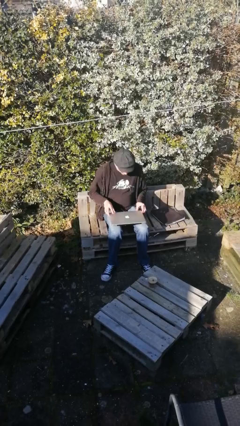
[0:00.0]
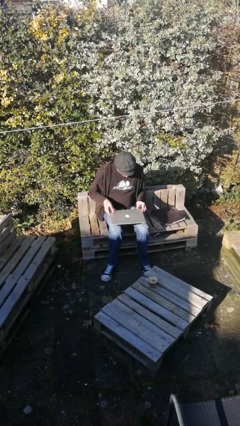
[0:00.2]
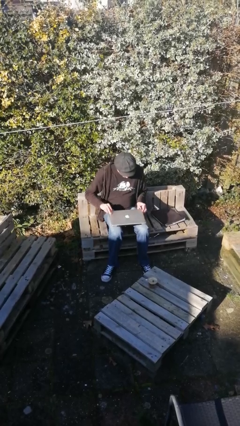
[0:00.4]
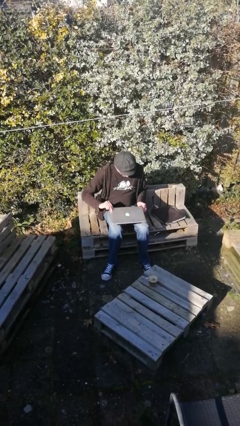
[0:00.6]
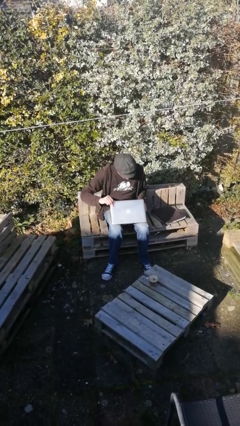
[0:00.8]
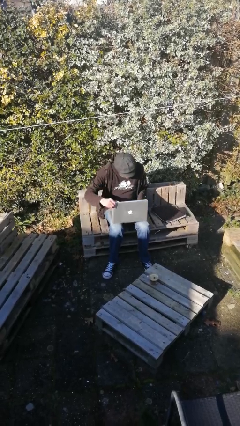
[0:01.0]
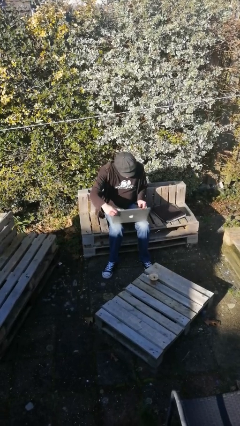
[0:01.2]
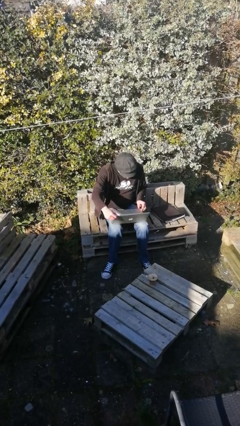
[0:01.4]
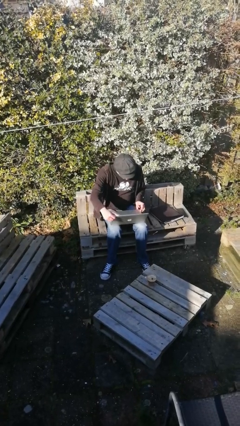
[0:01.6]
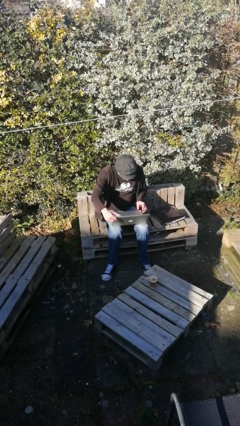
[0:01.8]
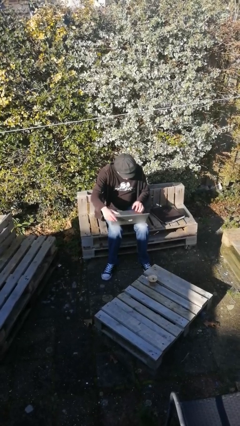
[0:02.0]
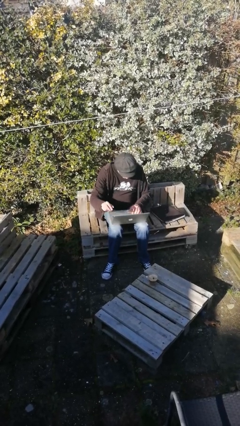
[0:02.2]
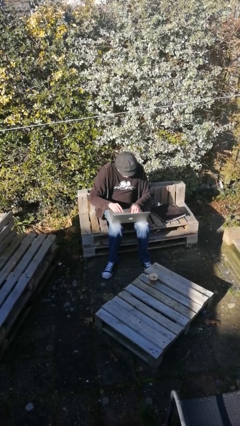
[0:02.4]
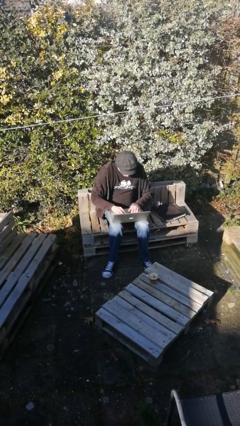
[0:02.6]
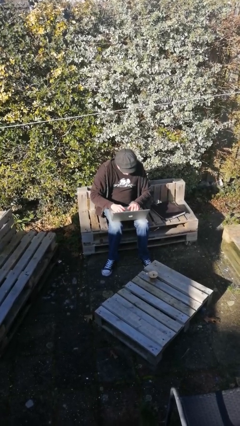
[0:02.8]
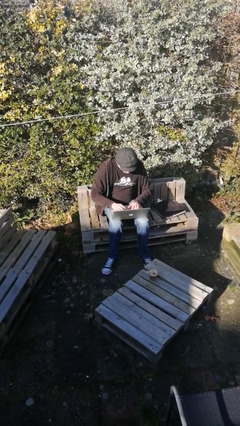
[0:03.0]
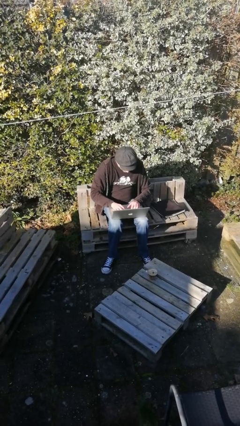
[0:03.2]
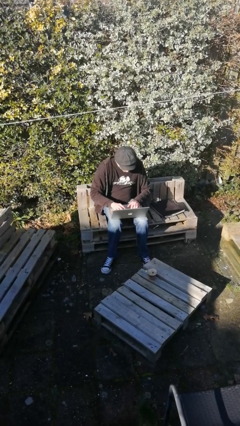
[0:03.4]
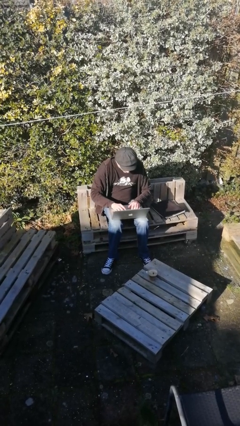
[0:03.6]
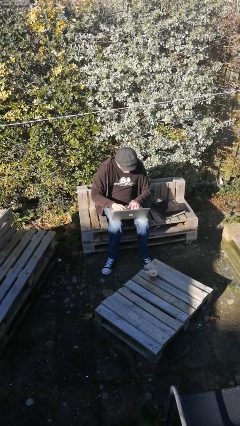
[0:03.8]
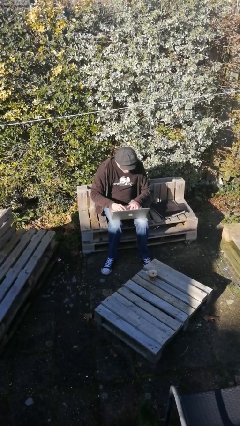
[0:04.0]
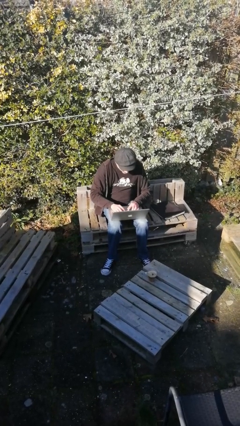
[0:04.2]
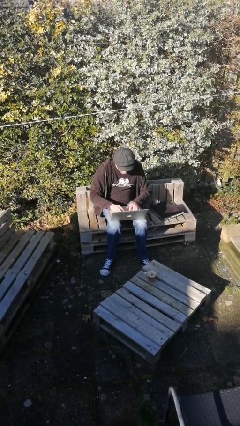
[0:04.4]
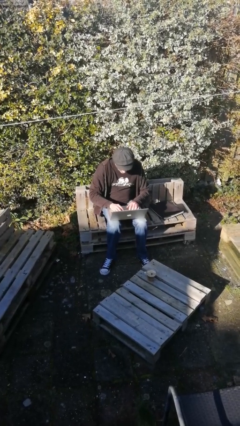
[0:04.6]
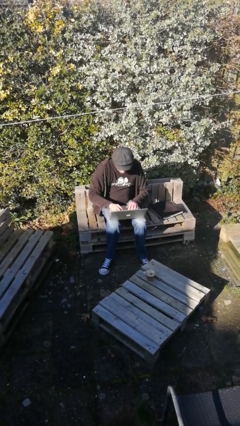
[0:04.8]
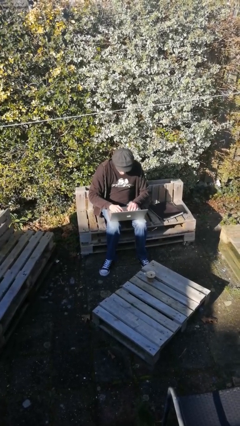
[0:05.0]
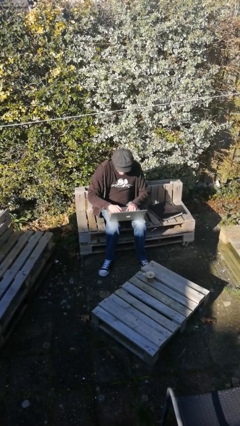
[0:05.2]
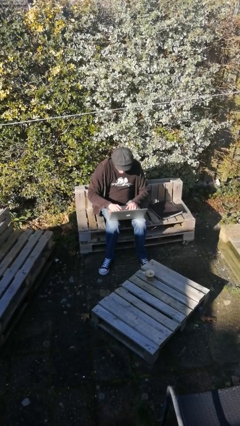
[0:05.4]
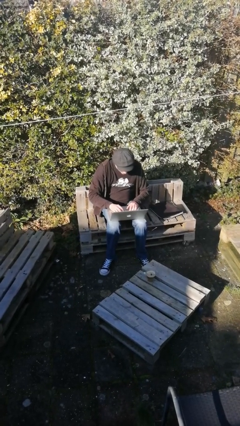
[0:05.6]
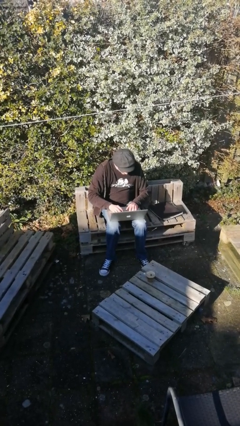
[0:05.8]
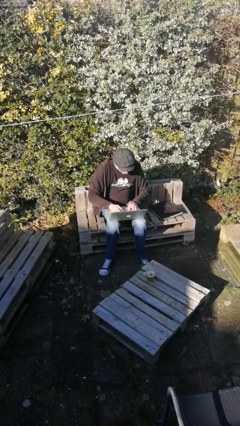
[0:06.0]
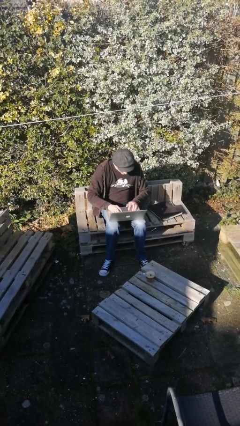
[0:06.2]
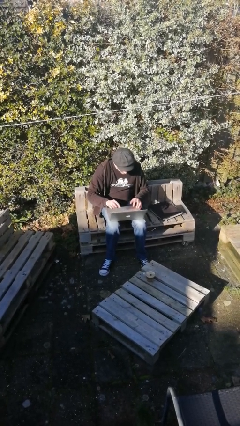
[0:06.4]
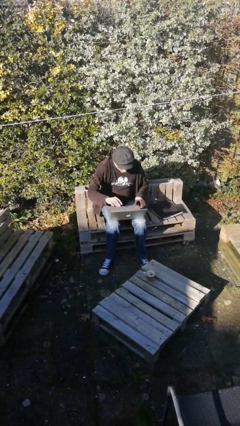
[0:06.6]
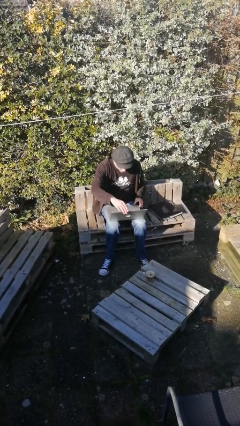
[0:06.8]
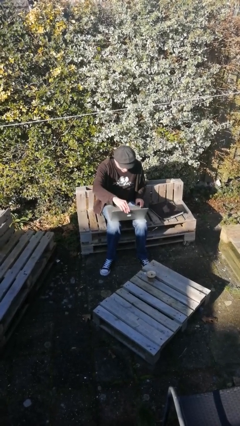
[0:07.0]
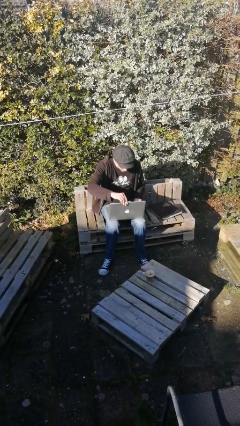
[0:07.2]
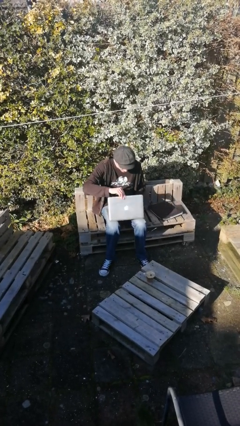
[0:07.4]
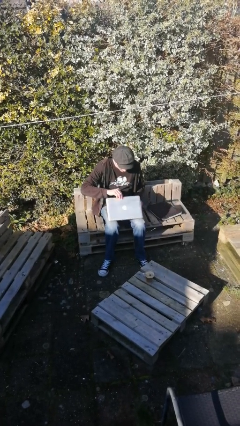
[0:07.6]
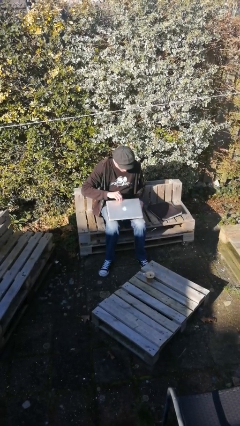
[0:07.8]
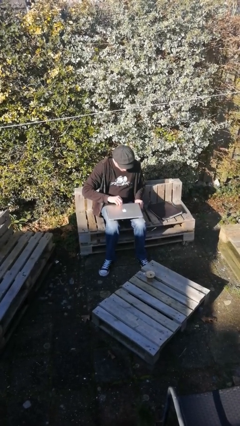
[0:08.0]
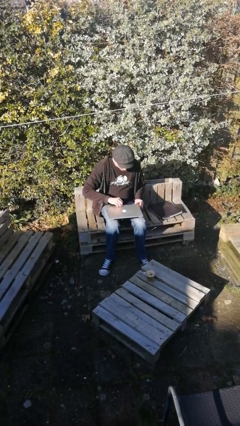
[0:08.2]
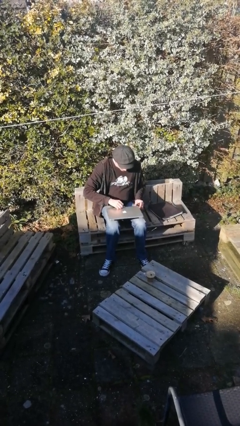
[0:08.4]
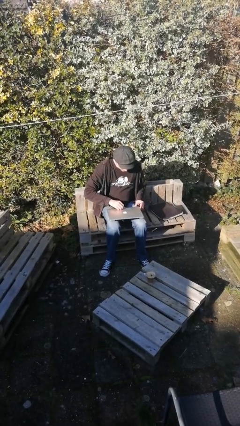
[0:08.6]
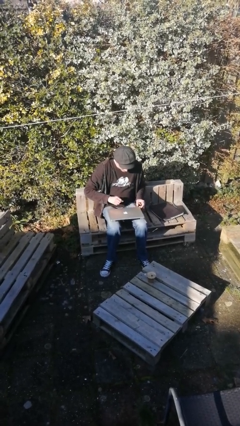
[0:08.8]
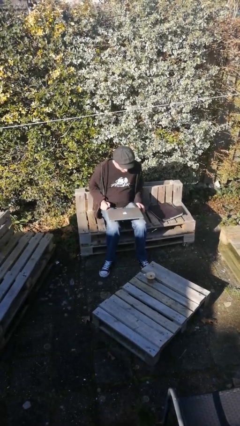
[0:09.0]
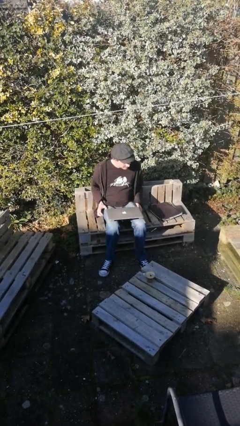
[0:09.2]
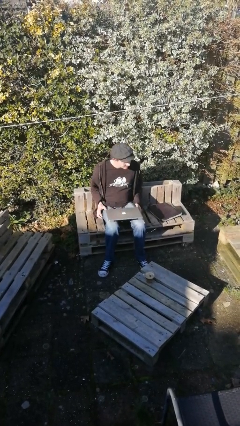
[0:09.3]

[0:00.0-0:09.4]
person interacts with laptop

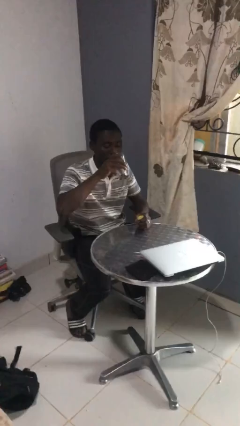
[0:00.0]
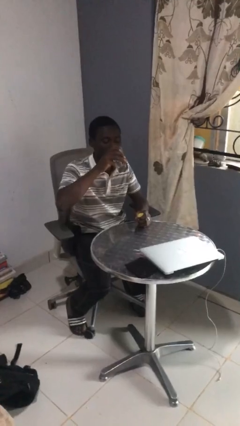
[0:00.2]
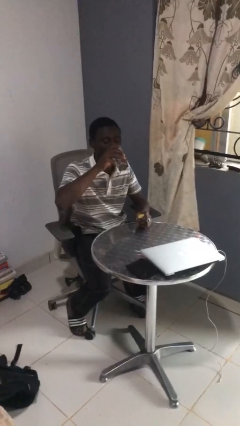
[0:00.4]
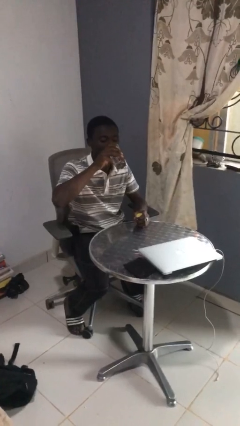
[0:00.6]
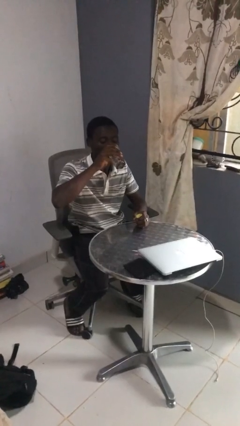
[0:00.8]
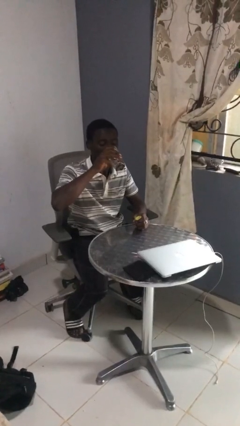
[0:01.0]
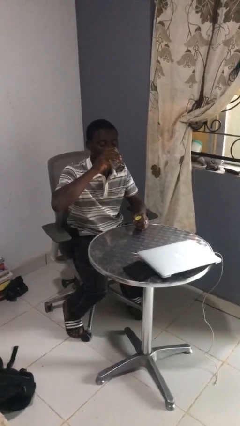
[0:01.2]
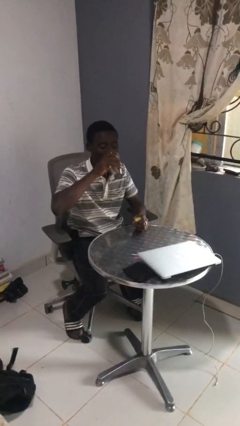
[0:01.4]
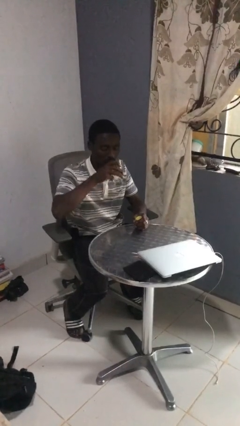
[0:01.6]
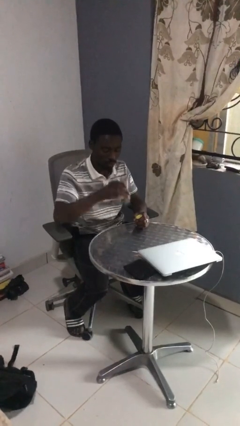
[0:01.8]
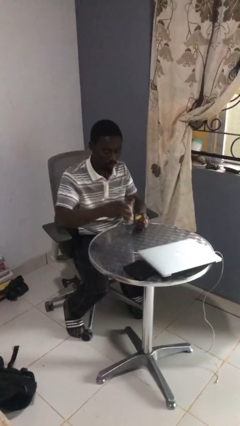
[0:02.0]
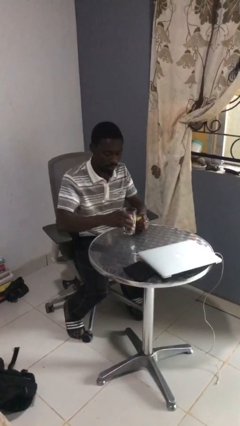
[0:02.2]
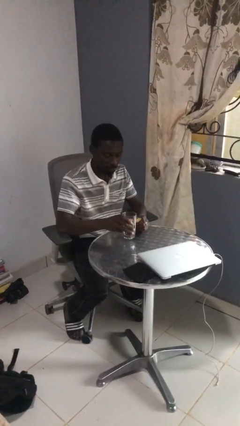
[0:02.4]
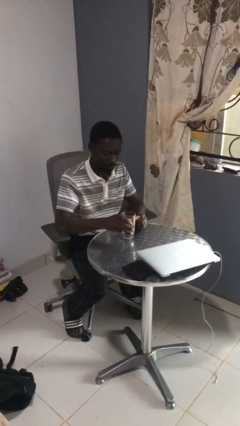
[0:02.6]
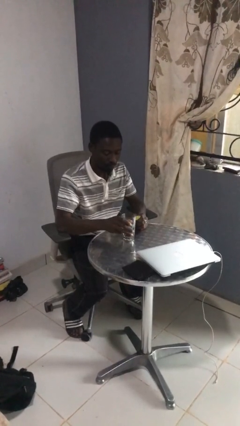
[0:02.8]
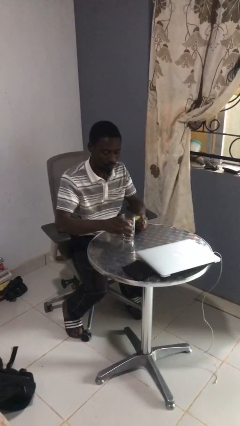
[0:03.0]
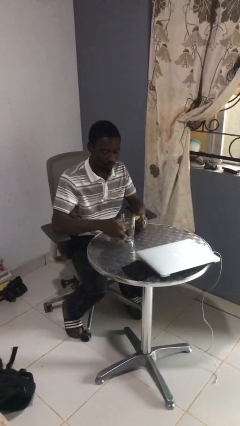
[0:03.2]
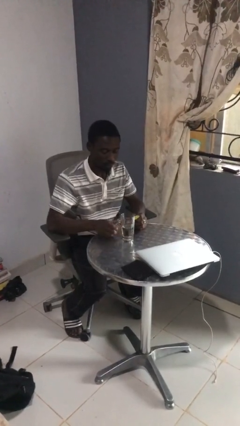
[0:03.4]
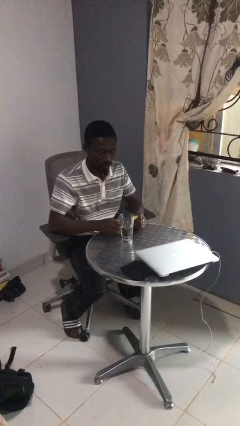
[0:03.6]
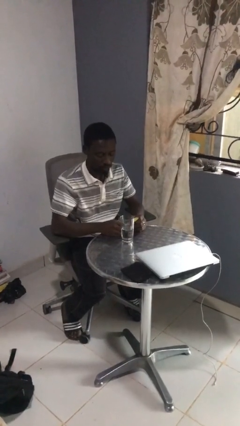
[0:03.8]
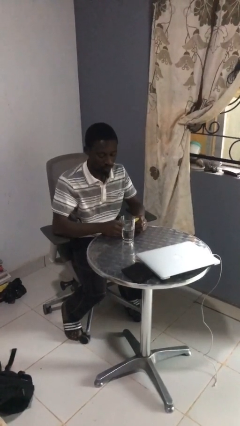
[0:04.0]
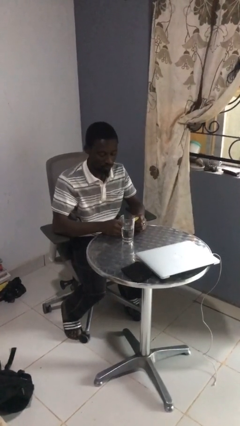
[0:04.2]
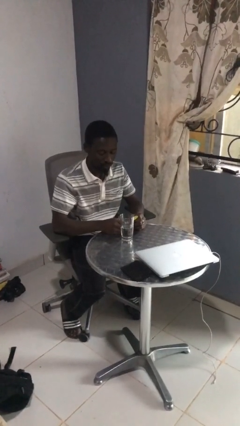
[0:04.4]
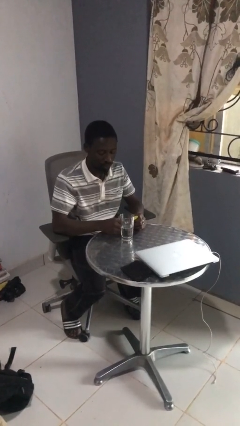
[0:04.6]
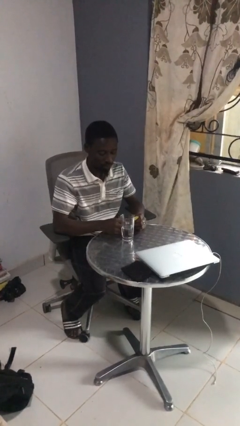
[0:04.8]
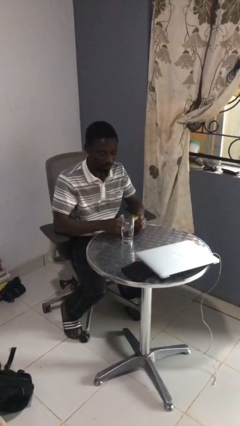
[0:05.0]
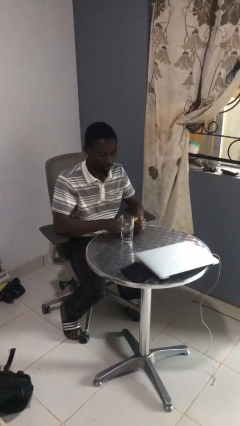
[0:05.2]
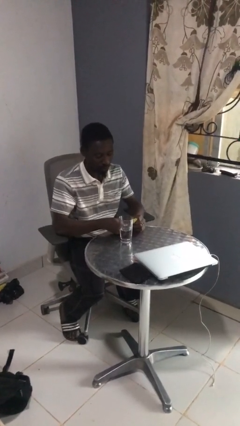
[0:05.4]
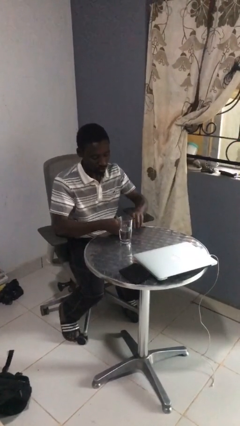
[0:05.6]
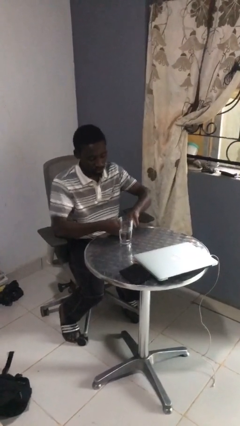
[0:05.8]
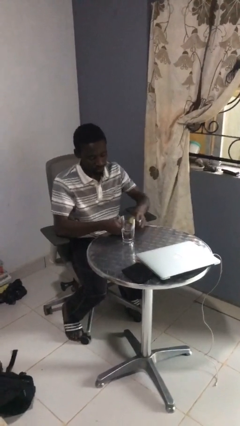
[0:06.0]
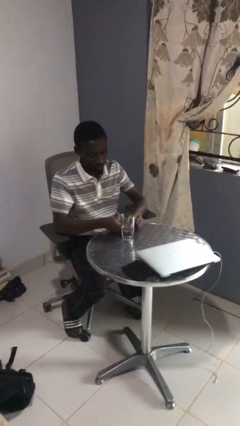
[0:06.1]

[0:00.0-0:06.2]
person drinks from cup

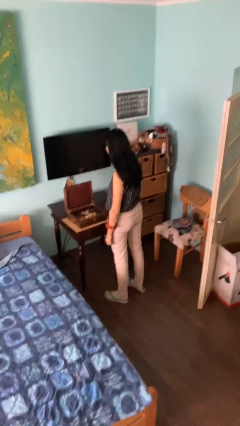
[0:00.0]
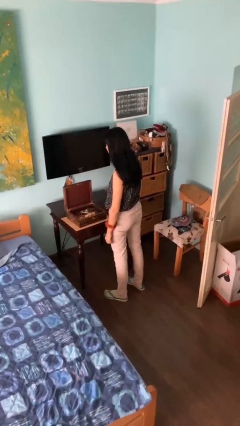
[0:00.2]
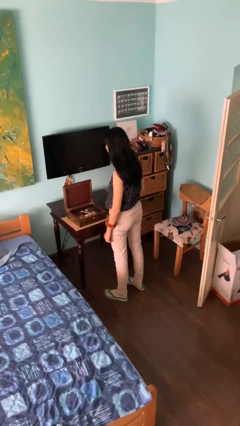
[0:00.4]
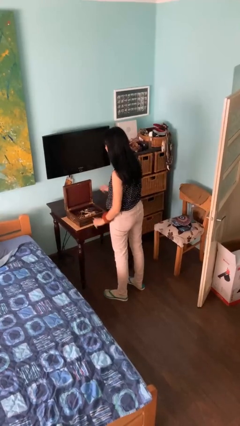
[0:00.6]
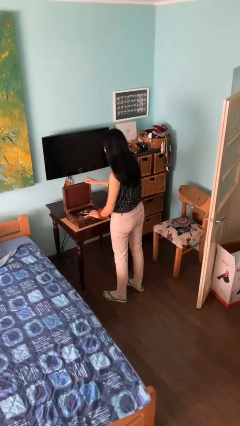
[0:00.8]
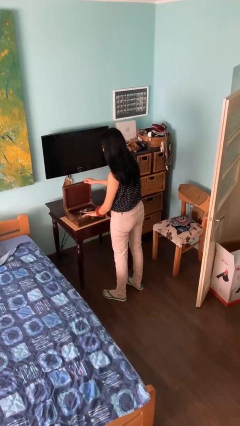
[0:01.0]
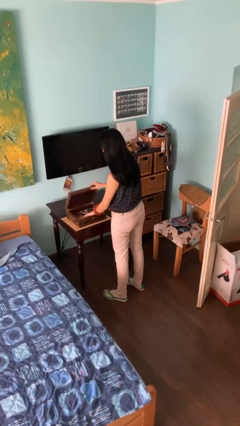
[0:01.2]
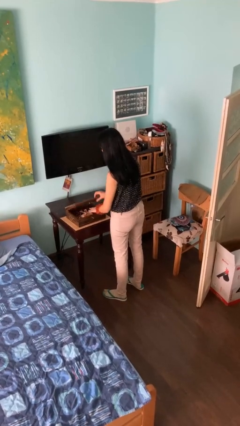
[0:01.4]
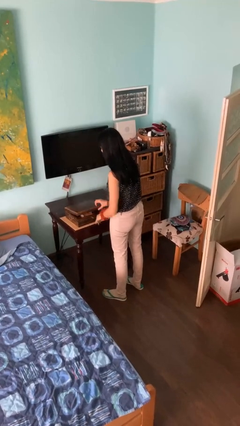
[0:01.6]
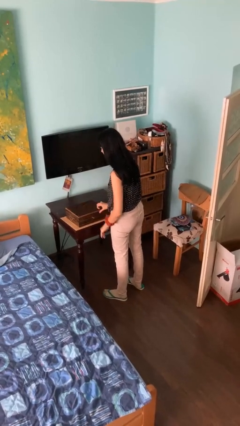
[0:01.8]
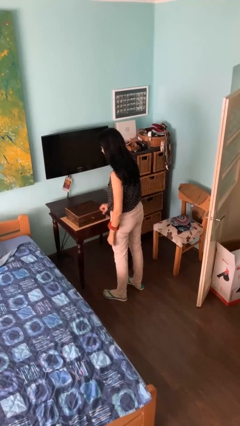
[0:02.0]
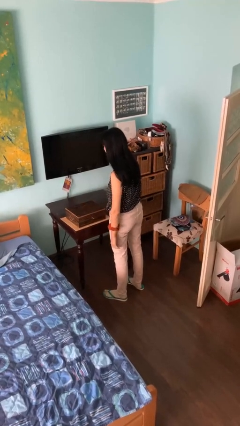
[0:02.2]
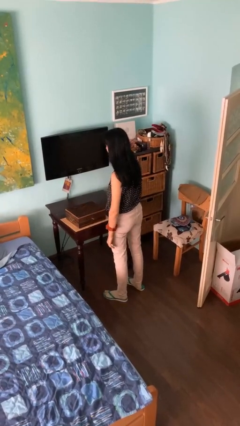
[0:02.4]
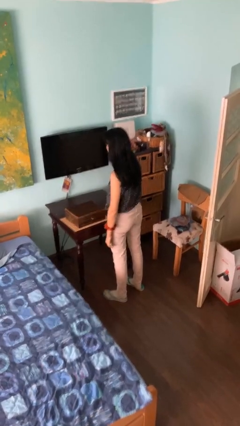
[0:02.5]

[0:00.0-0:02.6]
person closes jewelry box
